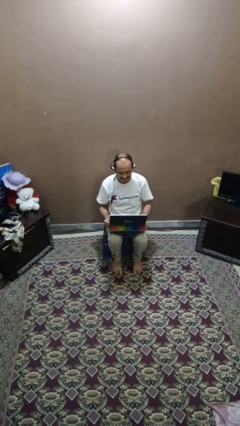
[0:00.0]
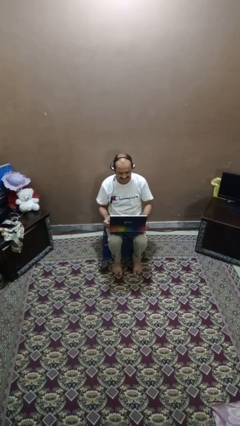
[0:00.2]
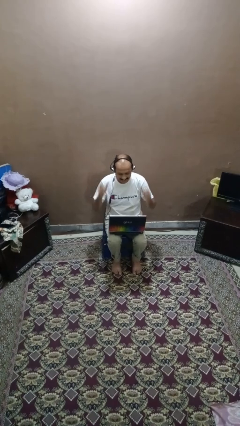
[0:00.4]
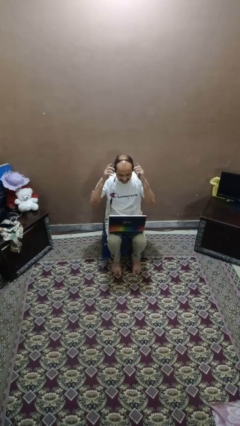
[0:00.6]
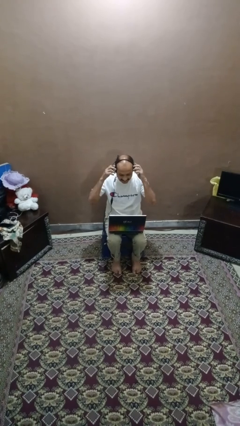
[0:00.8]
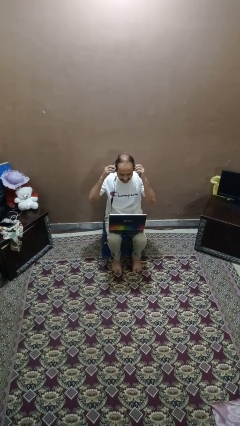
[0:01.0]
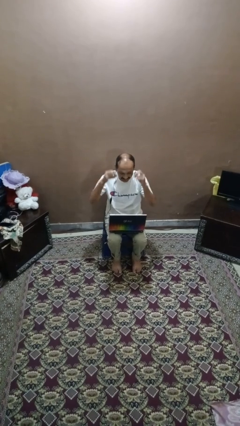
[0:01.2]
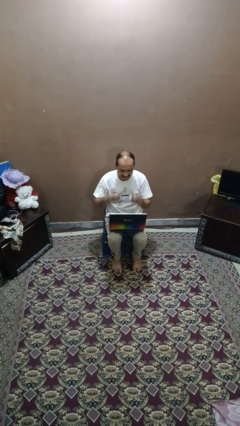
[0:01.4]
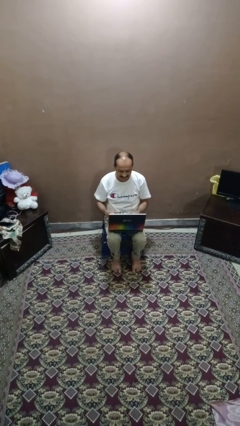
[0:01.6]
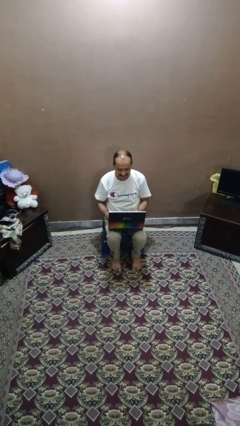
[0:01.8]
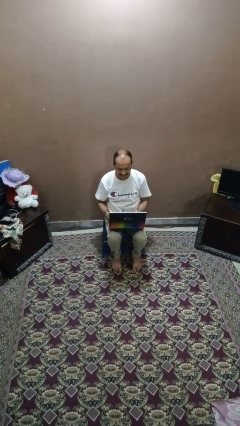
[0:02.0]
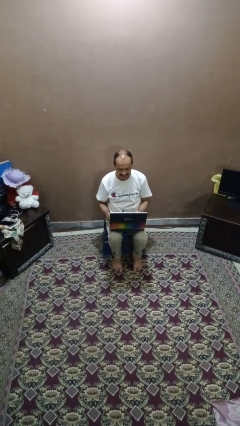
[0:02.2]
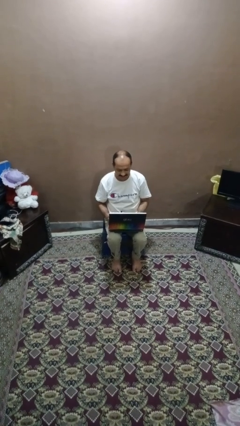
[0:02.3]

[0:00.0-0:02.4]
person takes off headphones

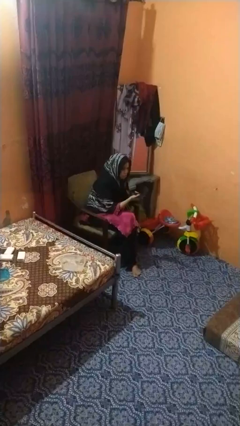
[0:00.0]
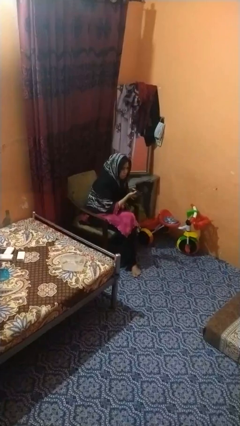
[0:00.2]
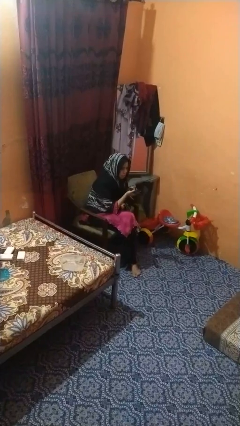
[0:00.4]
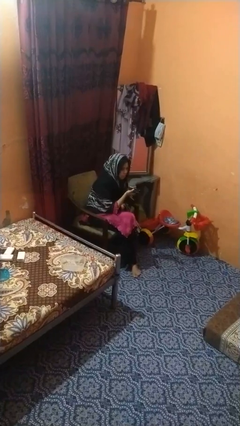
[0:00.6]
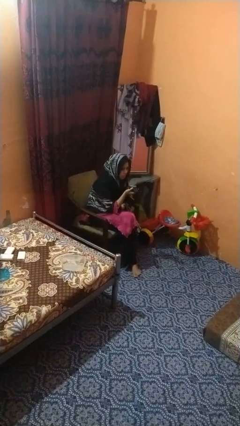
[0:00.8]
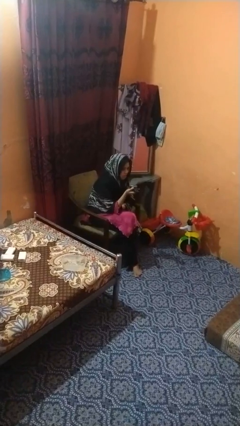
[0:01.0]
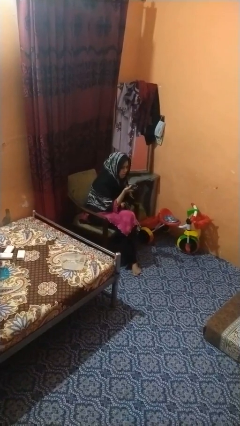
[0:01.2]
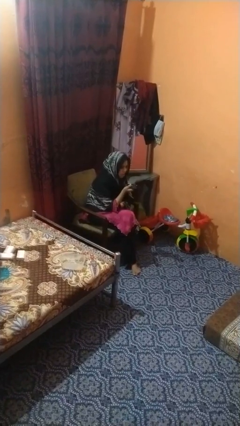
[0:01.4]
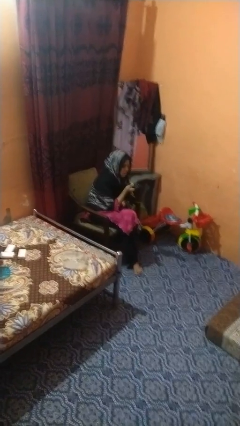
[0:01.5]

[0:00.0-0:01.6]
person uses television remote

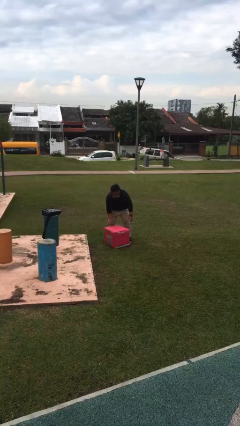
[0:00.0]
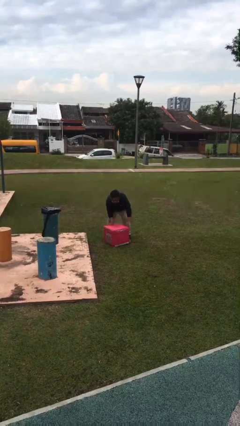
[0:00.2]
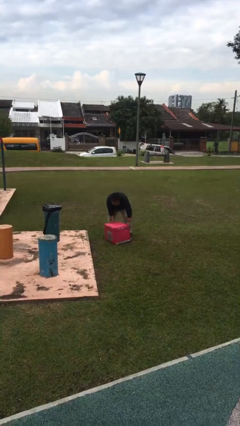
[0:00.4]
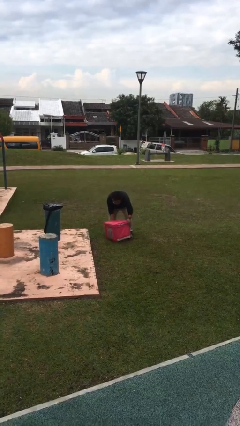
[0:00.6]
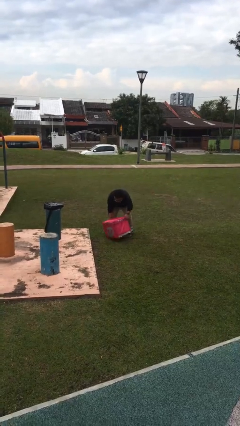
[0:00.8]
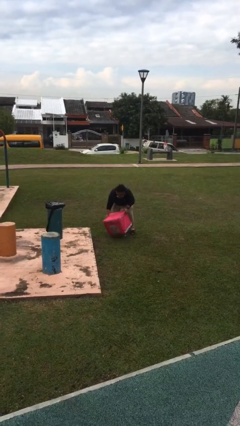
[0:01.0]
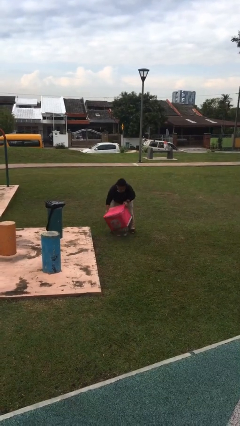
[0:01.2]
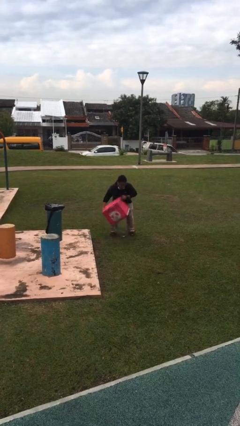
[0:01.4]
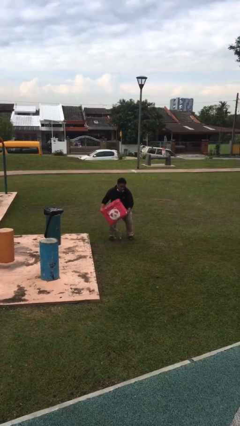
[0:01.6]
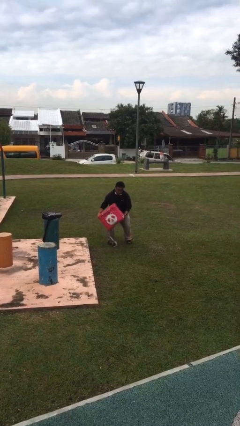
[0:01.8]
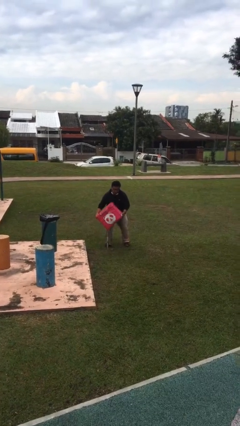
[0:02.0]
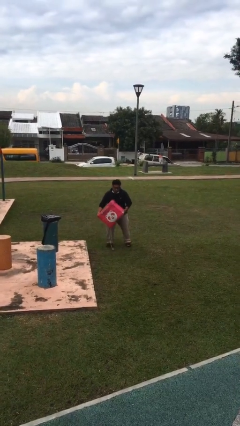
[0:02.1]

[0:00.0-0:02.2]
person picks up object from floor

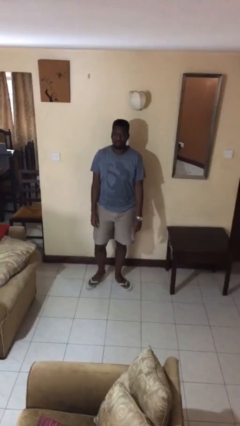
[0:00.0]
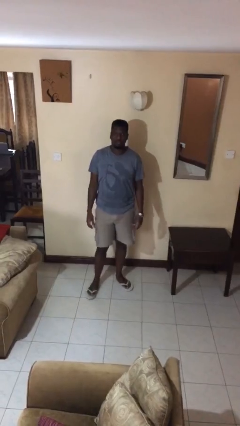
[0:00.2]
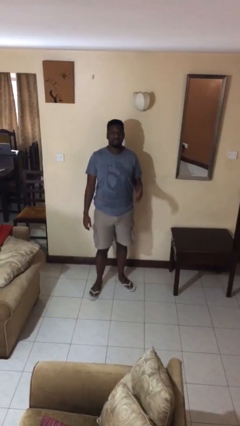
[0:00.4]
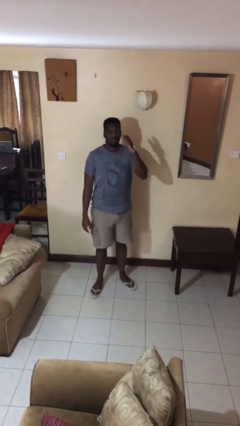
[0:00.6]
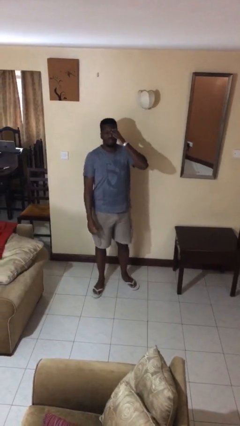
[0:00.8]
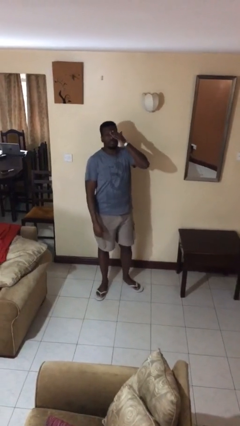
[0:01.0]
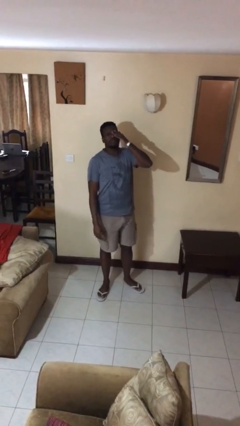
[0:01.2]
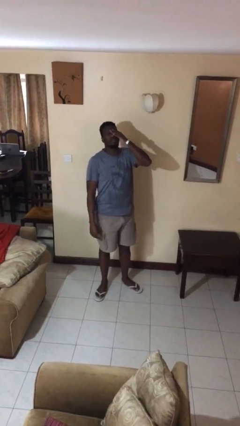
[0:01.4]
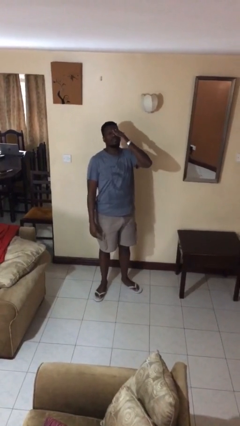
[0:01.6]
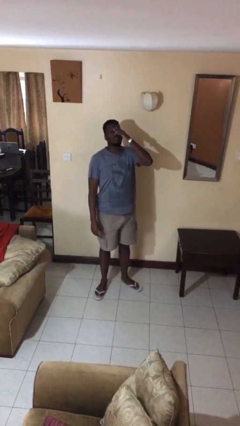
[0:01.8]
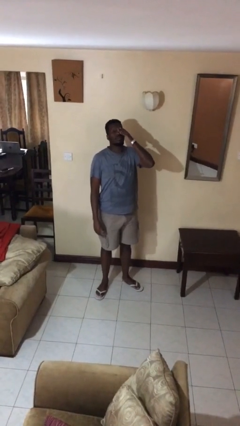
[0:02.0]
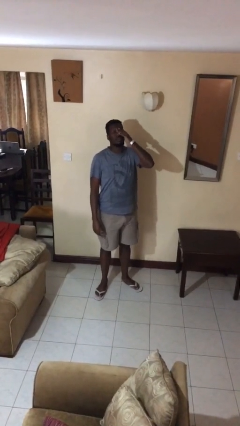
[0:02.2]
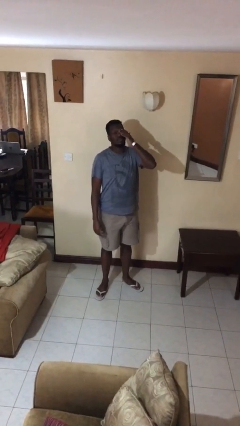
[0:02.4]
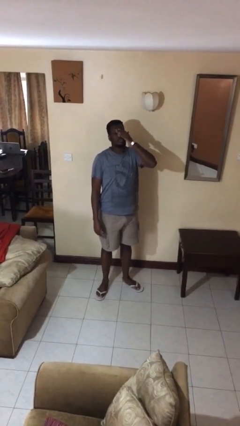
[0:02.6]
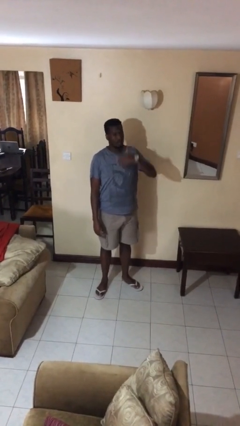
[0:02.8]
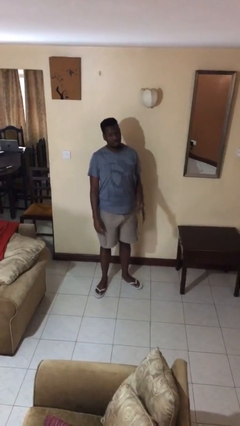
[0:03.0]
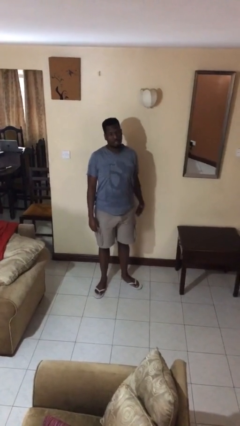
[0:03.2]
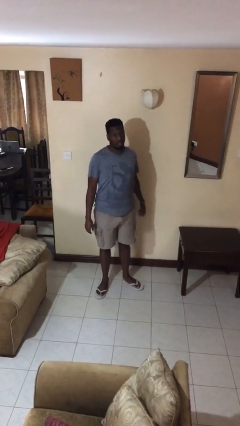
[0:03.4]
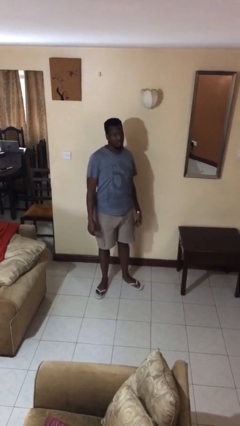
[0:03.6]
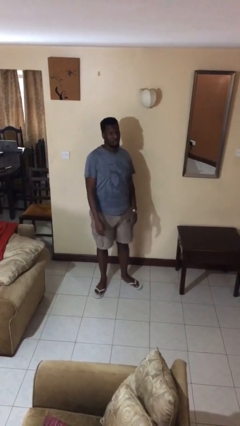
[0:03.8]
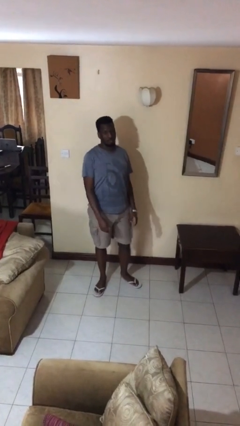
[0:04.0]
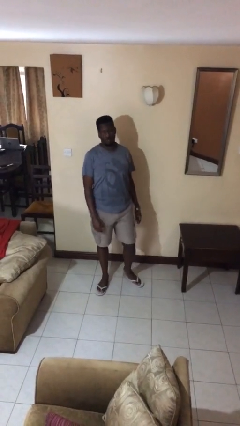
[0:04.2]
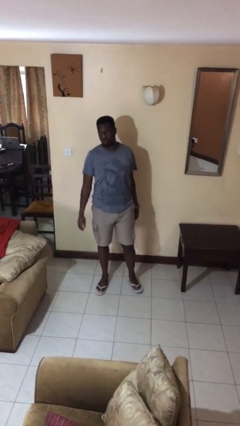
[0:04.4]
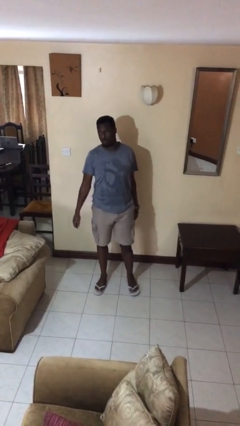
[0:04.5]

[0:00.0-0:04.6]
person rubs eyes

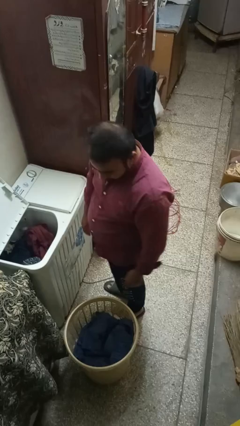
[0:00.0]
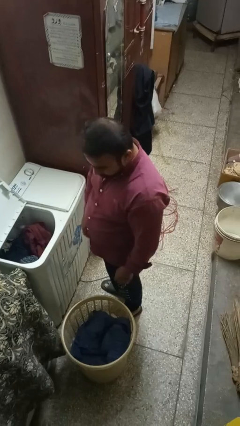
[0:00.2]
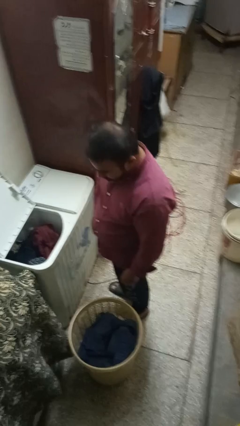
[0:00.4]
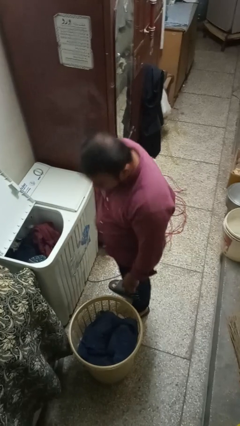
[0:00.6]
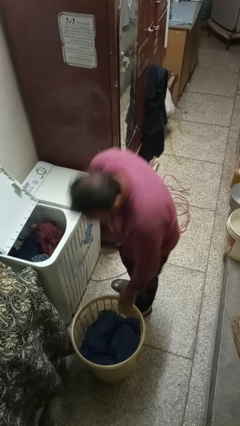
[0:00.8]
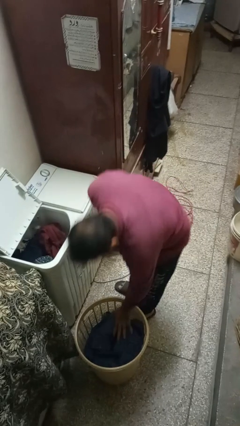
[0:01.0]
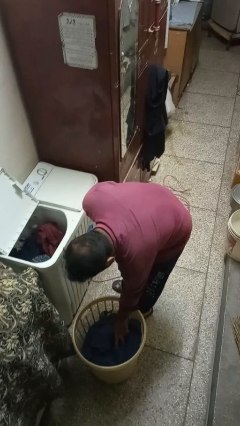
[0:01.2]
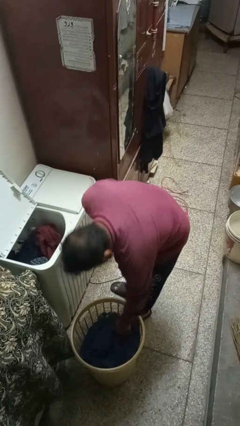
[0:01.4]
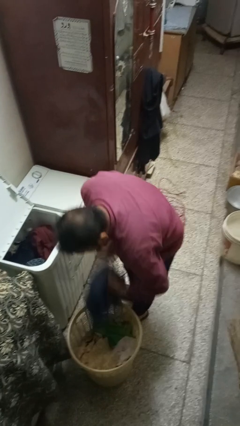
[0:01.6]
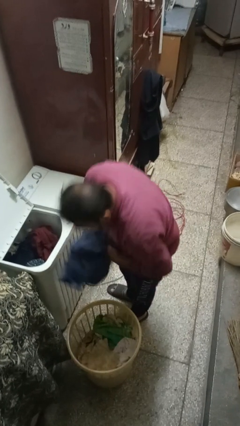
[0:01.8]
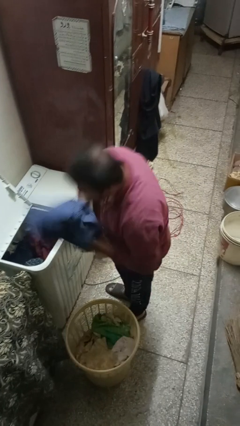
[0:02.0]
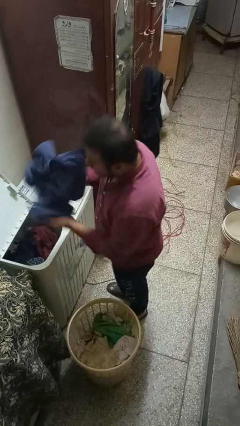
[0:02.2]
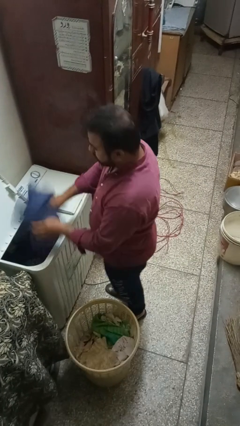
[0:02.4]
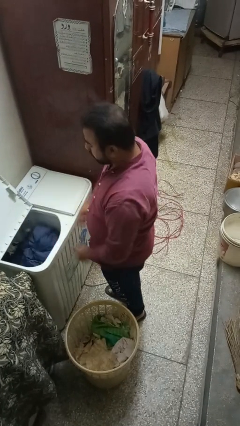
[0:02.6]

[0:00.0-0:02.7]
person loads clotheswasher

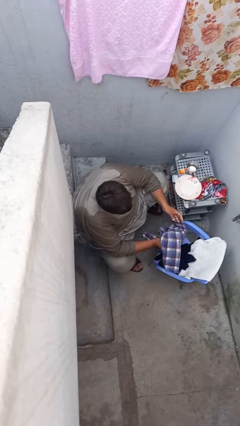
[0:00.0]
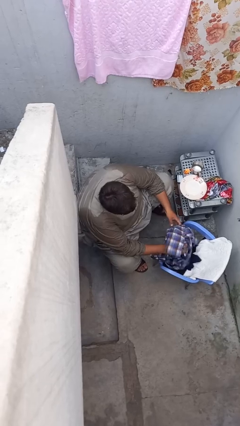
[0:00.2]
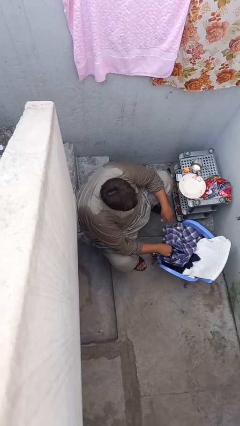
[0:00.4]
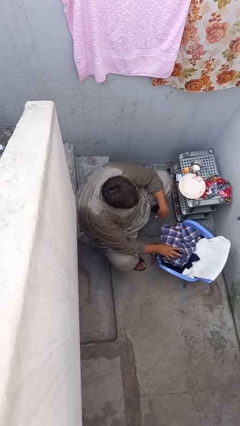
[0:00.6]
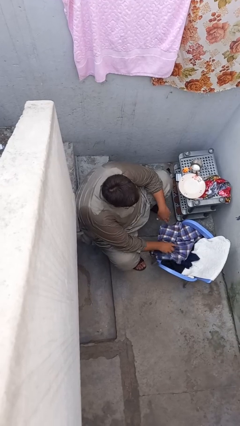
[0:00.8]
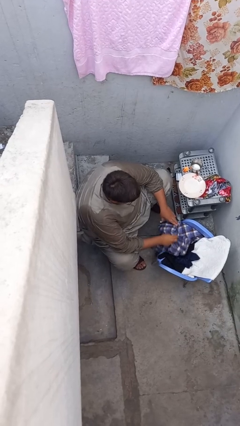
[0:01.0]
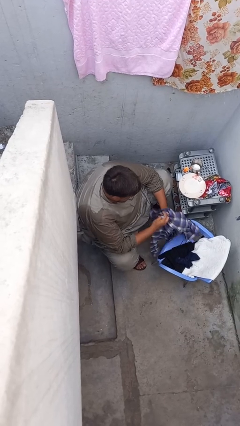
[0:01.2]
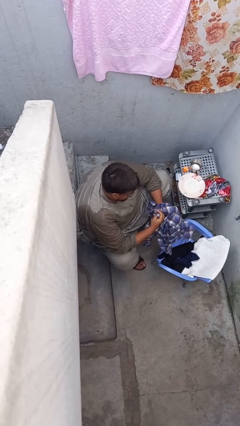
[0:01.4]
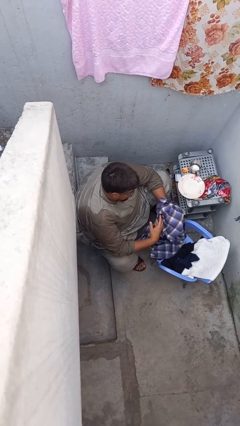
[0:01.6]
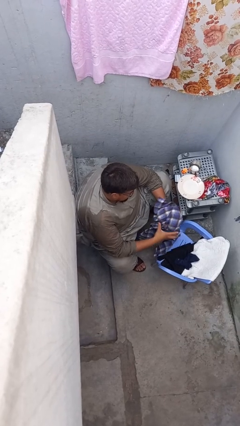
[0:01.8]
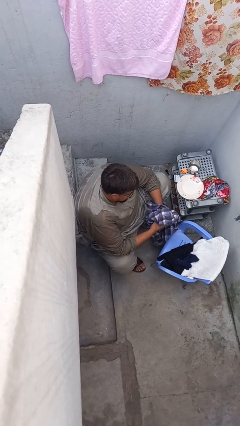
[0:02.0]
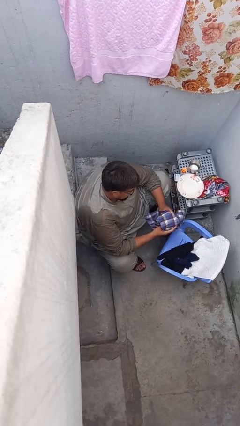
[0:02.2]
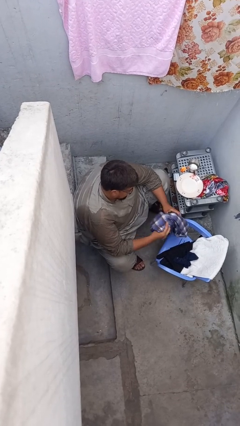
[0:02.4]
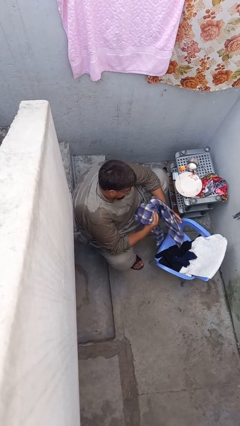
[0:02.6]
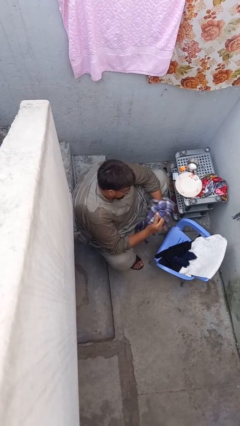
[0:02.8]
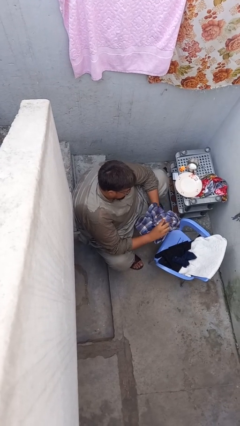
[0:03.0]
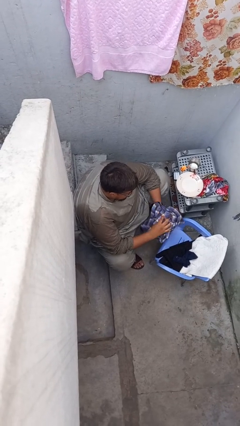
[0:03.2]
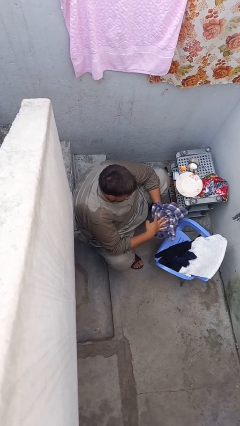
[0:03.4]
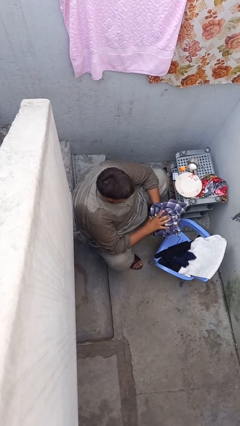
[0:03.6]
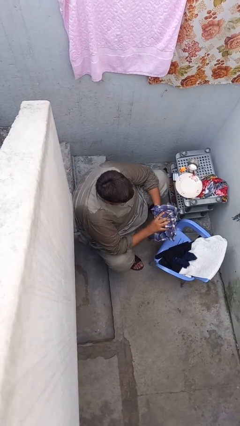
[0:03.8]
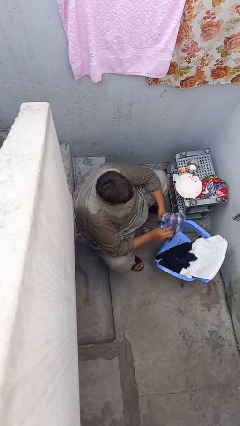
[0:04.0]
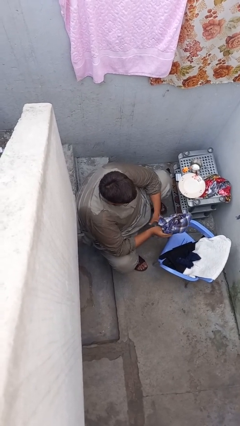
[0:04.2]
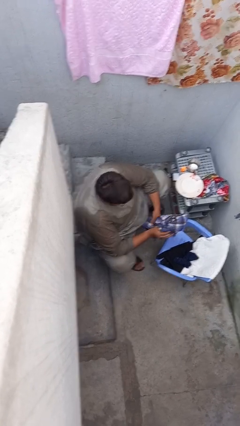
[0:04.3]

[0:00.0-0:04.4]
person folds shirt
